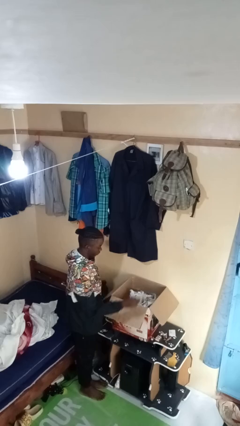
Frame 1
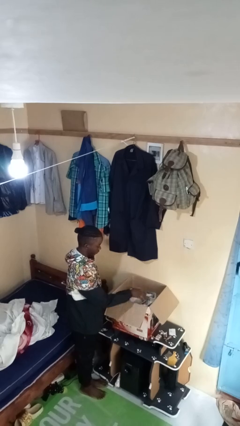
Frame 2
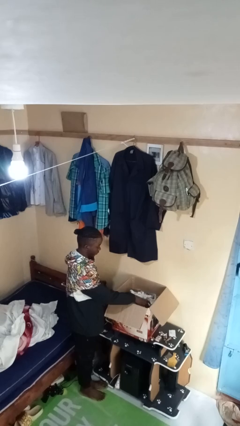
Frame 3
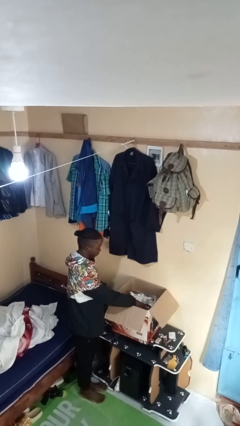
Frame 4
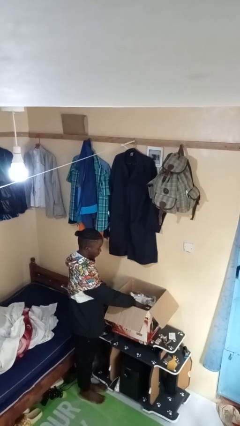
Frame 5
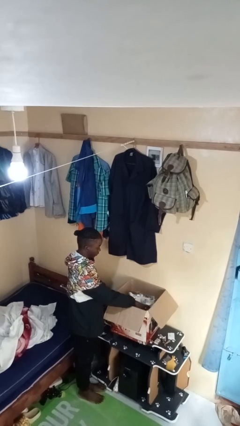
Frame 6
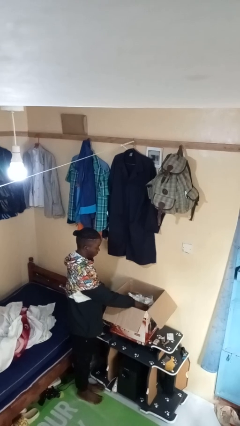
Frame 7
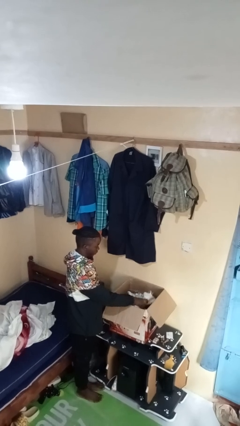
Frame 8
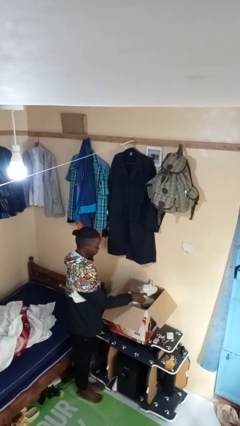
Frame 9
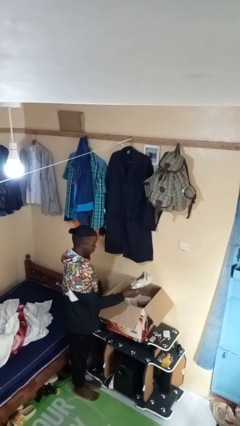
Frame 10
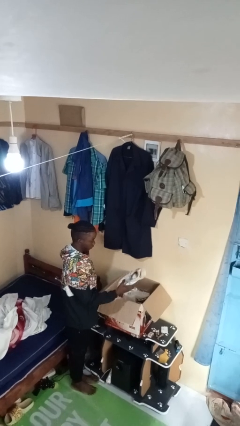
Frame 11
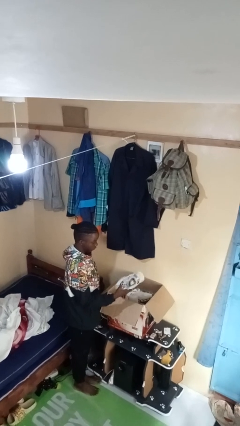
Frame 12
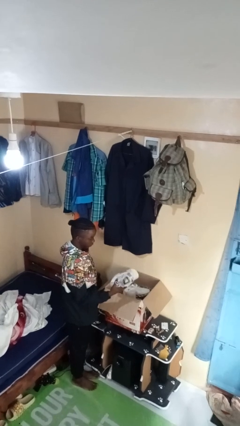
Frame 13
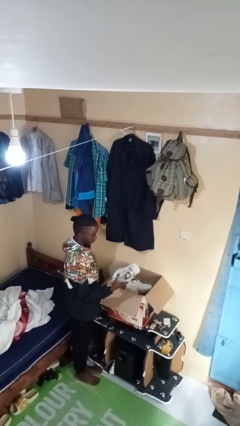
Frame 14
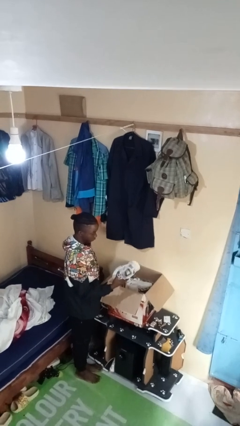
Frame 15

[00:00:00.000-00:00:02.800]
person takes object from box

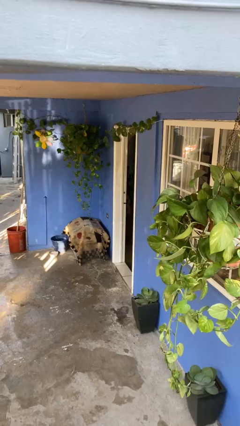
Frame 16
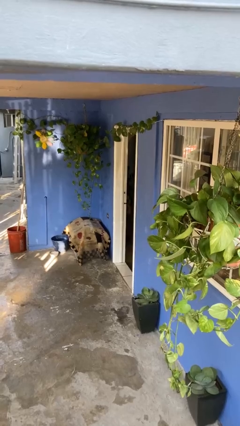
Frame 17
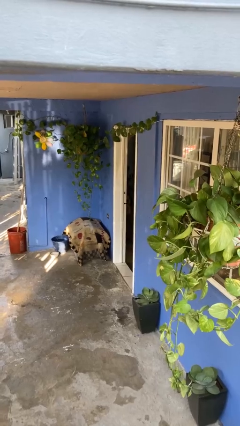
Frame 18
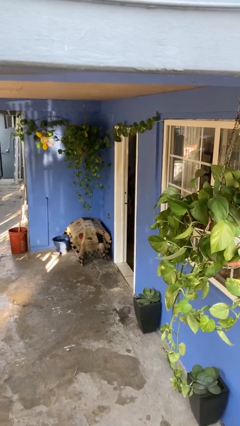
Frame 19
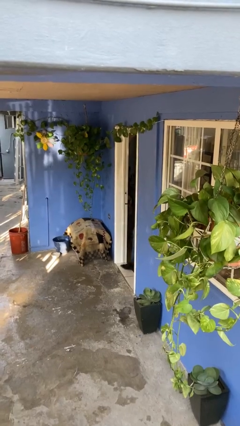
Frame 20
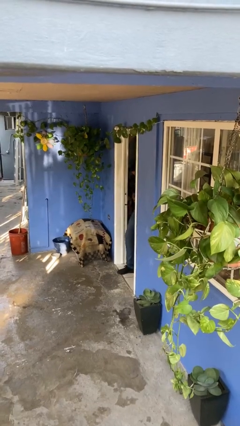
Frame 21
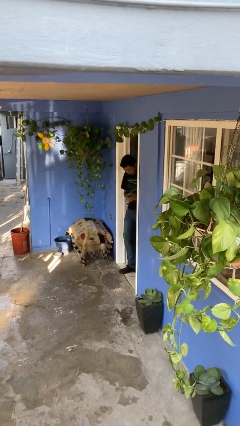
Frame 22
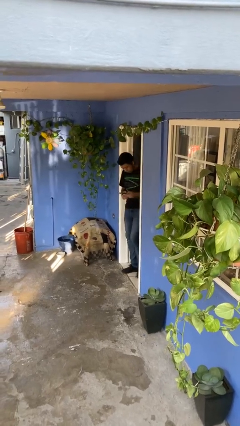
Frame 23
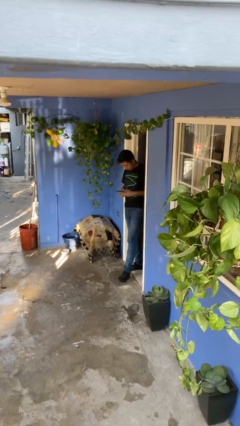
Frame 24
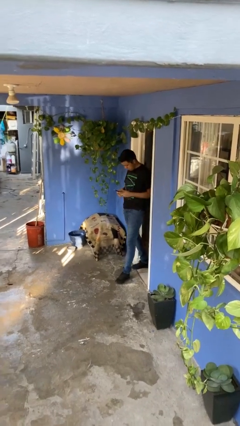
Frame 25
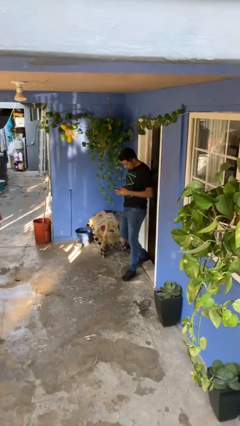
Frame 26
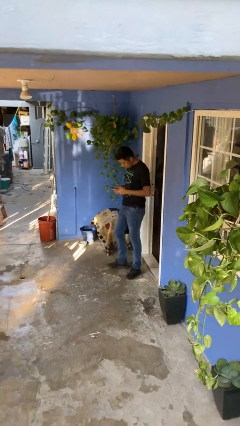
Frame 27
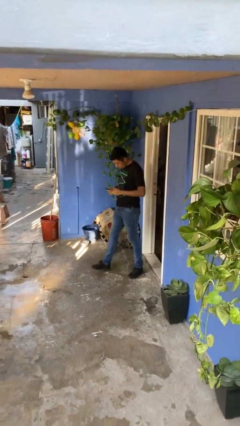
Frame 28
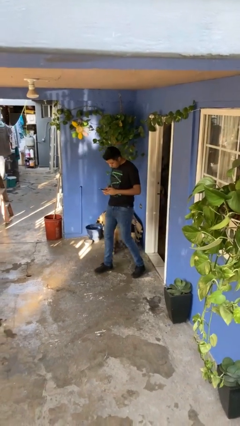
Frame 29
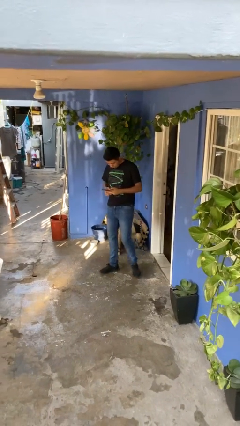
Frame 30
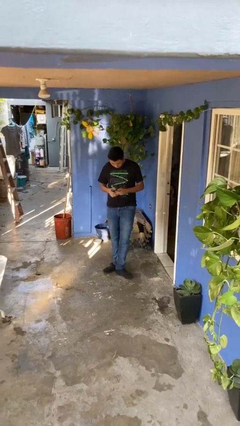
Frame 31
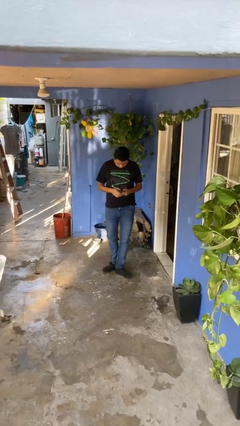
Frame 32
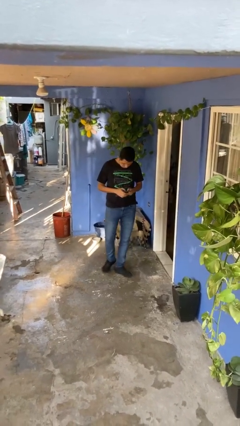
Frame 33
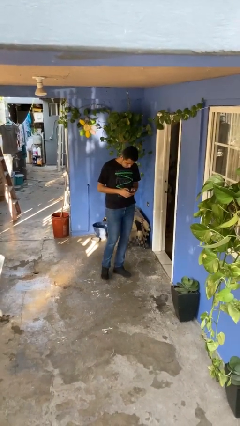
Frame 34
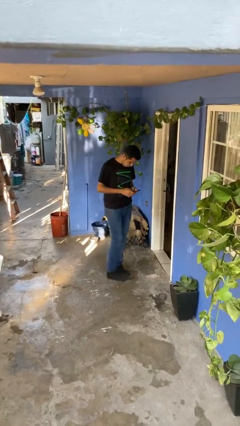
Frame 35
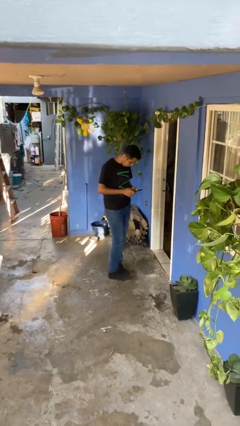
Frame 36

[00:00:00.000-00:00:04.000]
person enters scene through structure

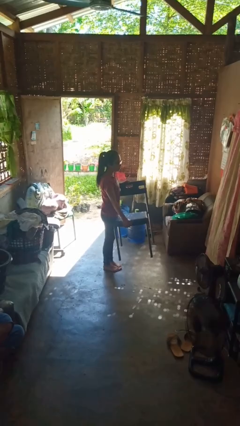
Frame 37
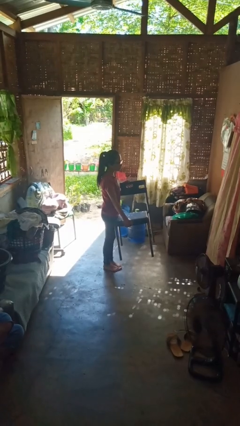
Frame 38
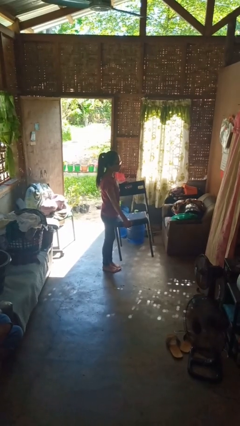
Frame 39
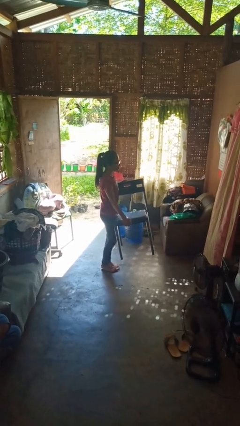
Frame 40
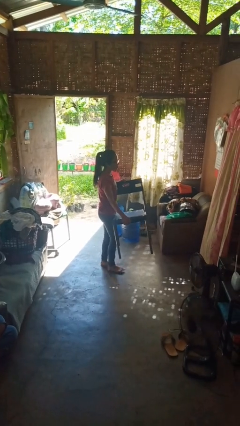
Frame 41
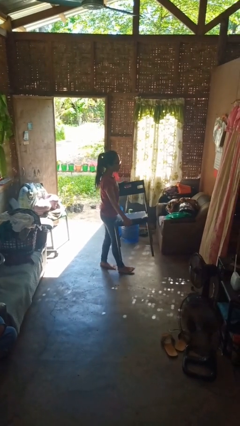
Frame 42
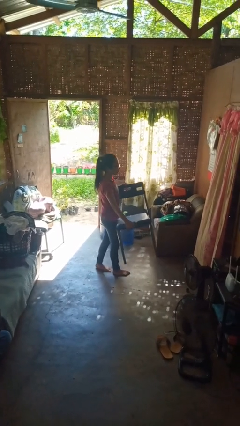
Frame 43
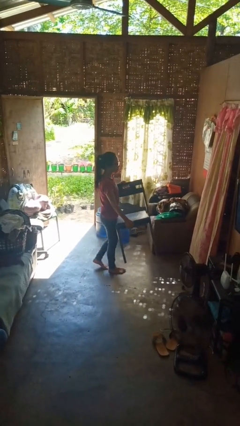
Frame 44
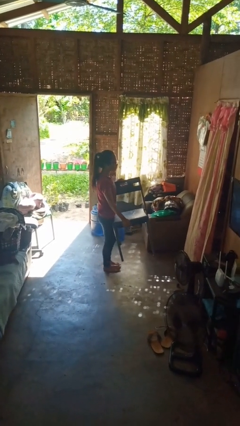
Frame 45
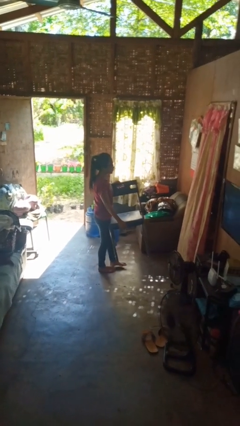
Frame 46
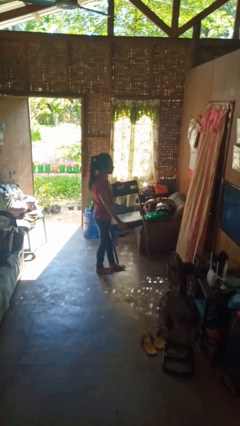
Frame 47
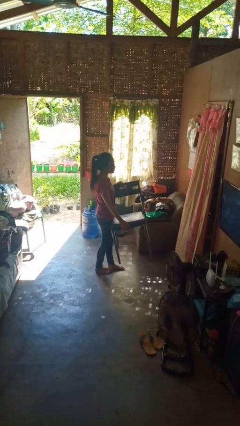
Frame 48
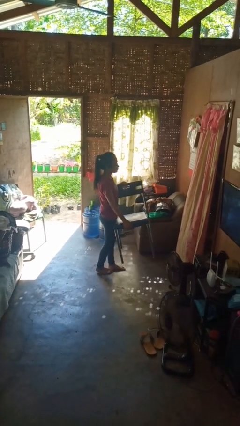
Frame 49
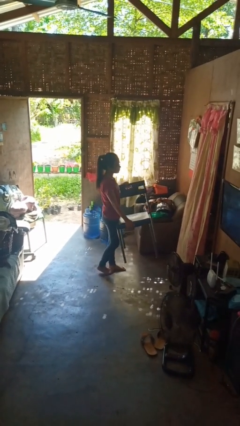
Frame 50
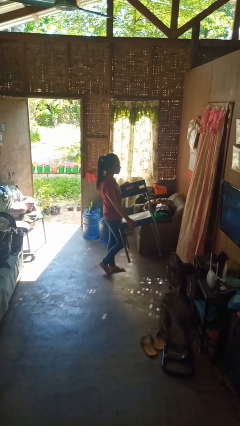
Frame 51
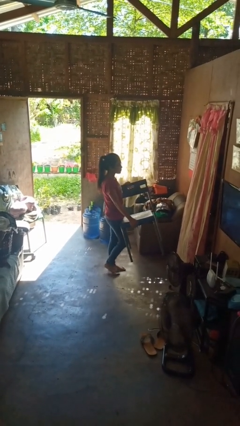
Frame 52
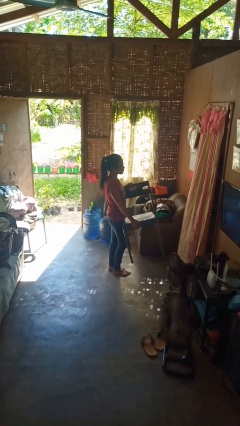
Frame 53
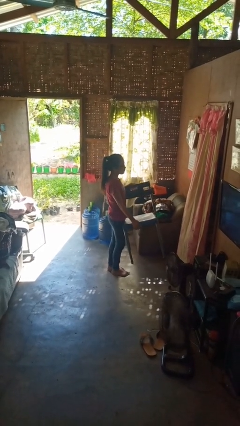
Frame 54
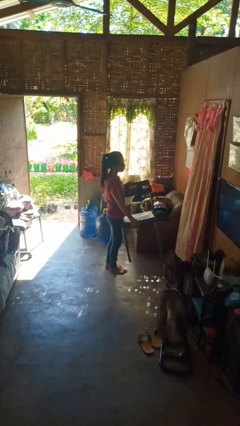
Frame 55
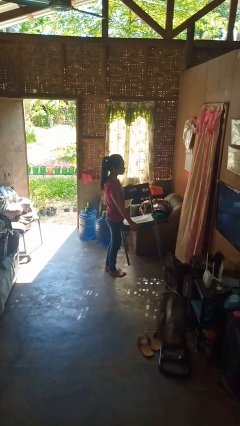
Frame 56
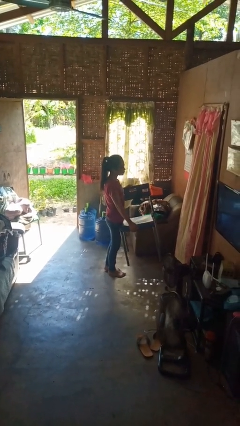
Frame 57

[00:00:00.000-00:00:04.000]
person carries furniture

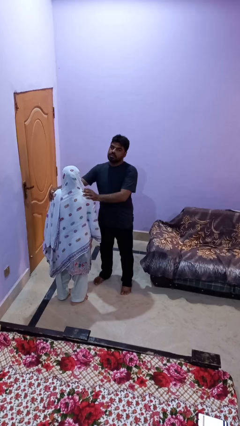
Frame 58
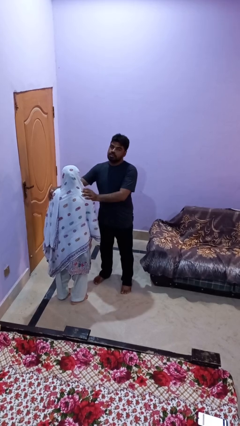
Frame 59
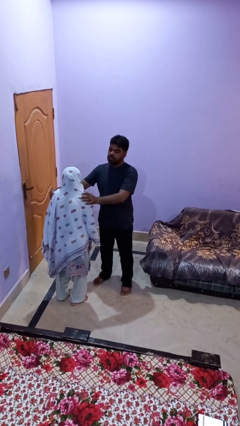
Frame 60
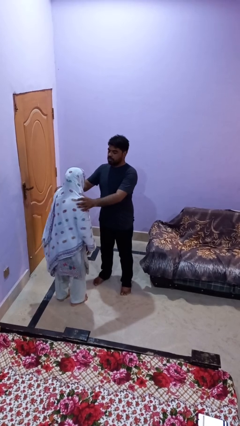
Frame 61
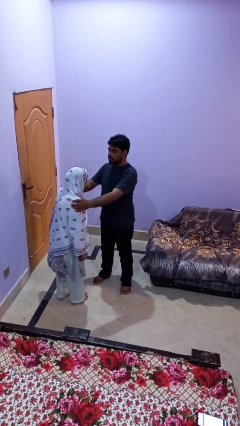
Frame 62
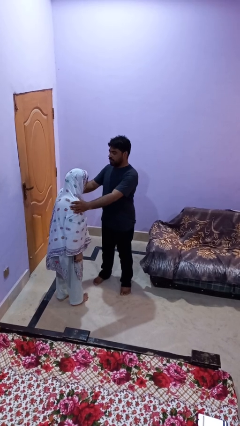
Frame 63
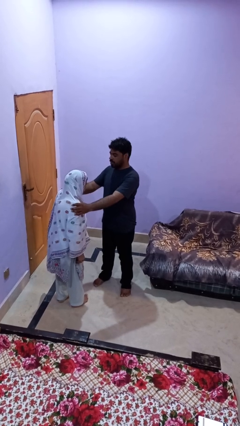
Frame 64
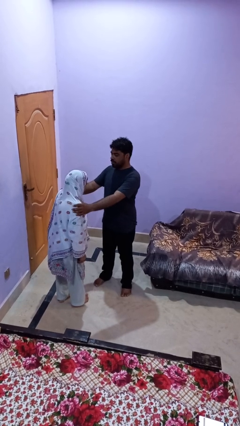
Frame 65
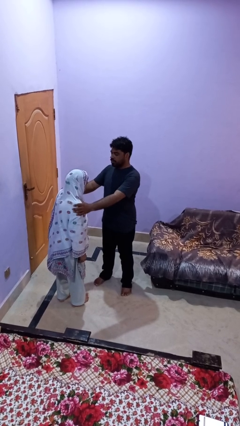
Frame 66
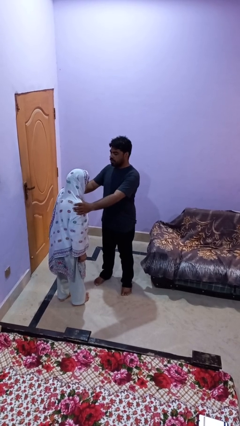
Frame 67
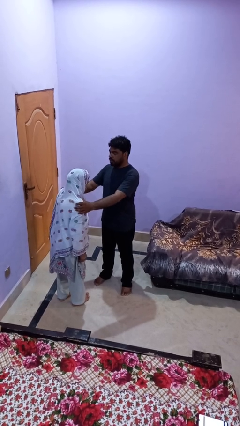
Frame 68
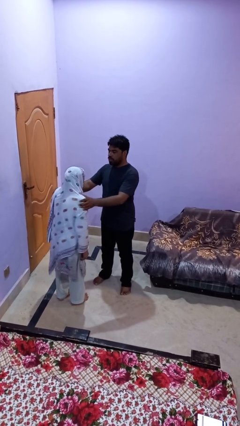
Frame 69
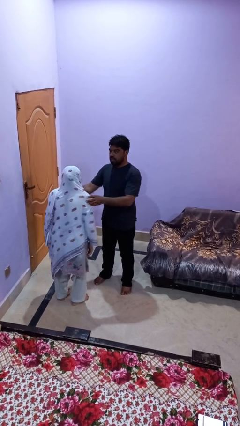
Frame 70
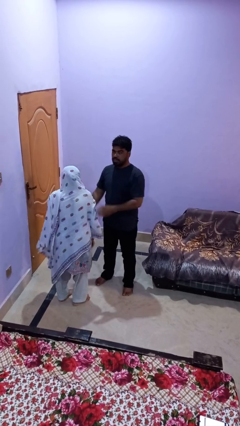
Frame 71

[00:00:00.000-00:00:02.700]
person spins person around

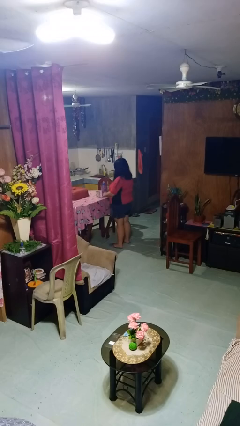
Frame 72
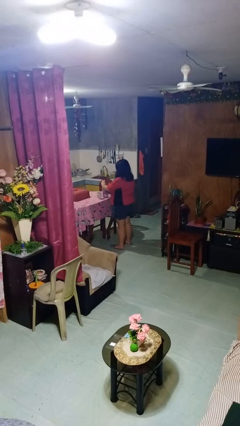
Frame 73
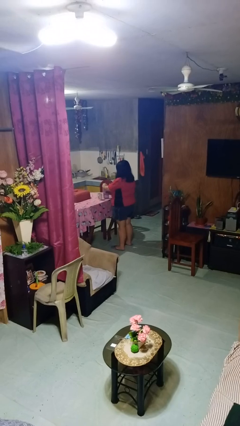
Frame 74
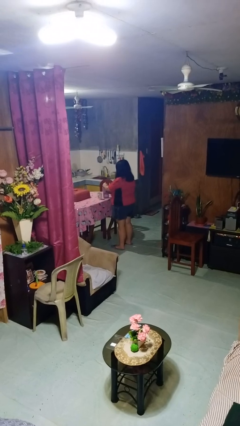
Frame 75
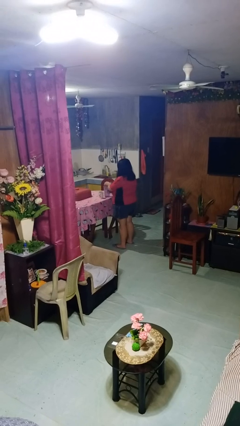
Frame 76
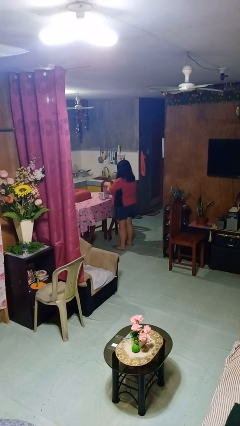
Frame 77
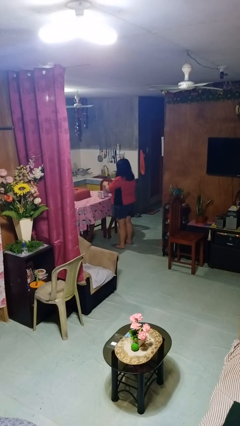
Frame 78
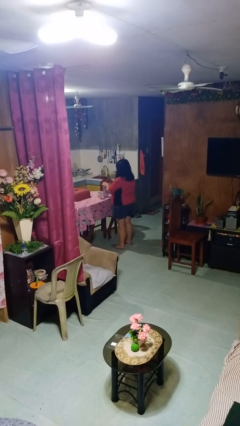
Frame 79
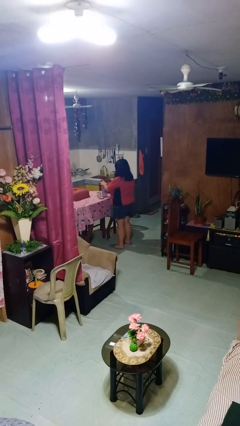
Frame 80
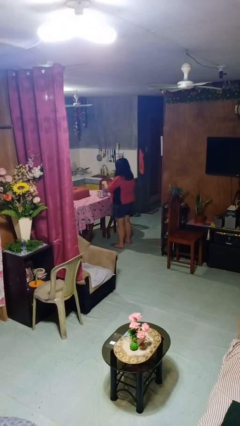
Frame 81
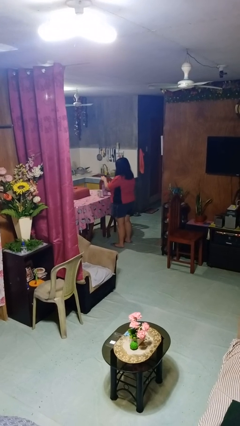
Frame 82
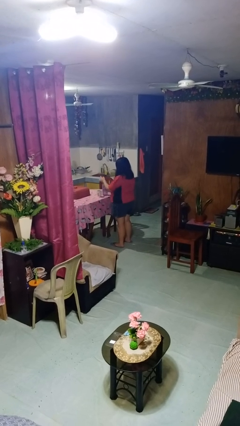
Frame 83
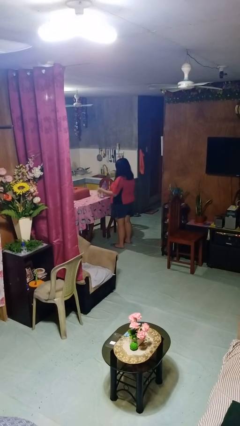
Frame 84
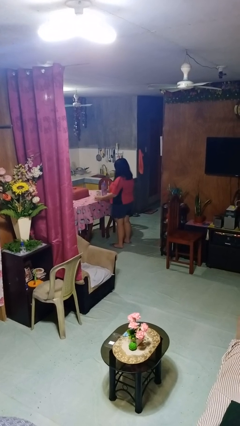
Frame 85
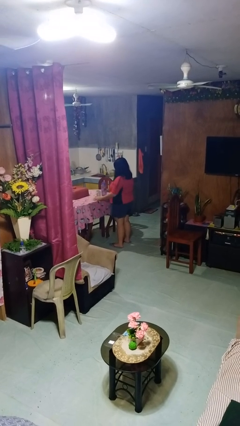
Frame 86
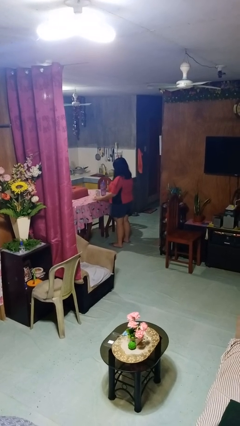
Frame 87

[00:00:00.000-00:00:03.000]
person unscrews lid from bottle

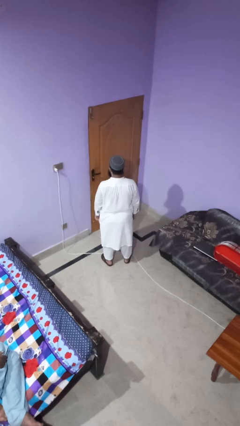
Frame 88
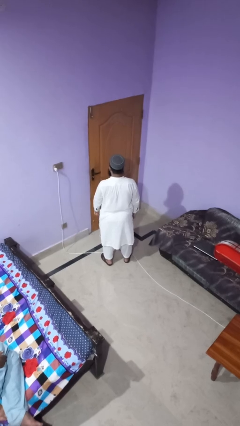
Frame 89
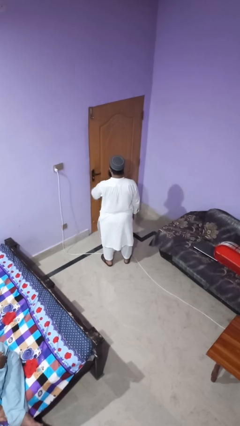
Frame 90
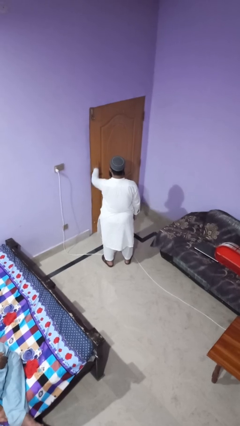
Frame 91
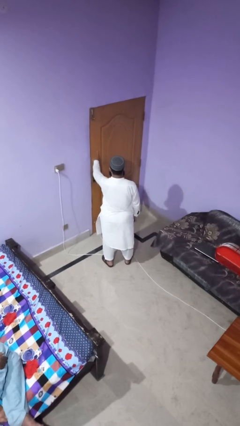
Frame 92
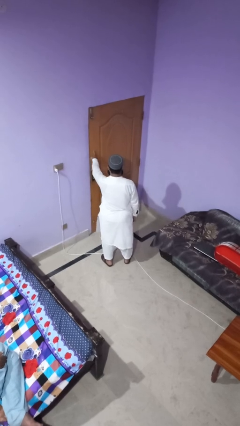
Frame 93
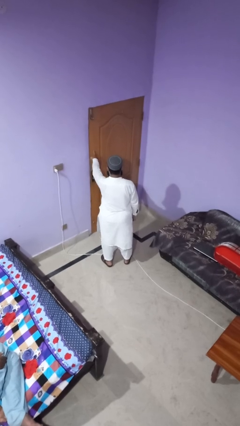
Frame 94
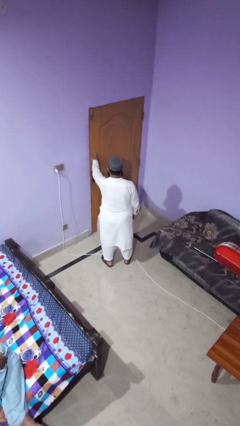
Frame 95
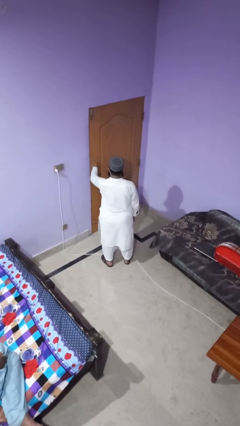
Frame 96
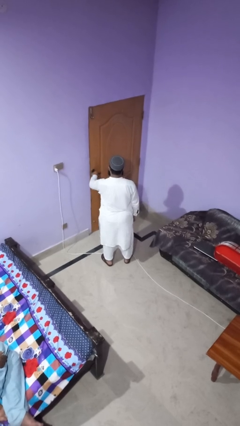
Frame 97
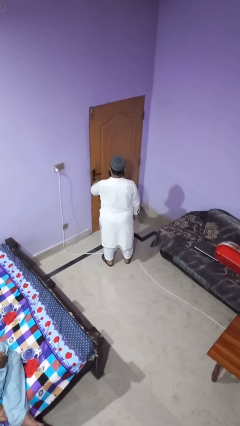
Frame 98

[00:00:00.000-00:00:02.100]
person taps object with finger
